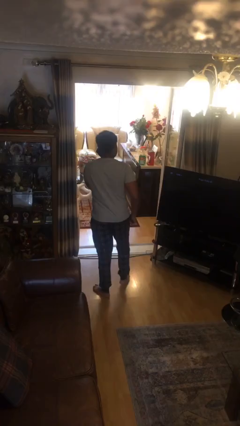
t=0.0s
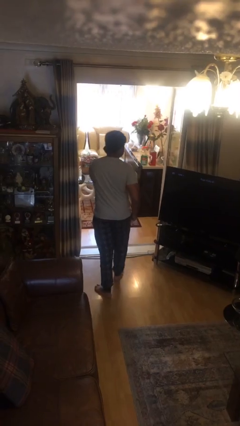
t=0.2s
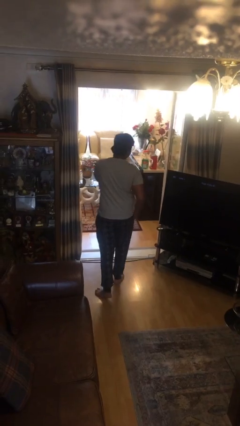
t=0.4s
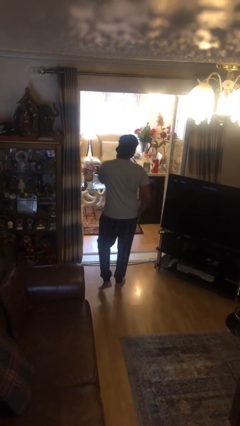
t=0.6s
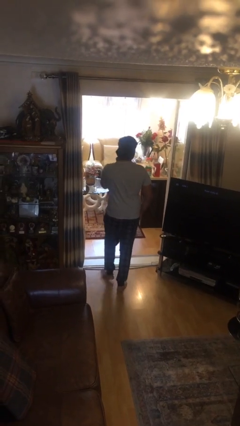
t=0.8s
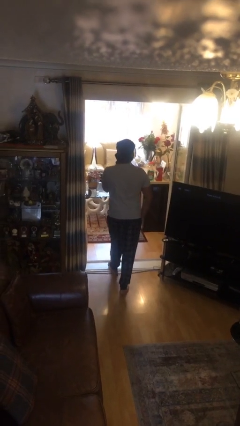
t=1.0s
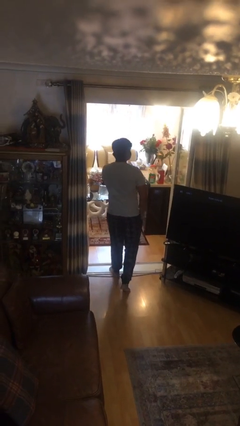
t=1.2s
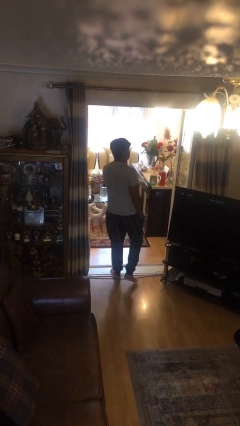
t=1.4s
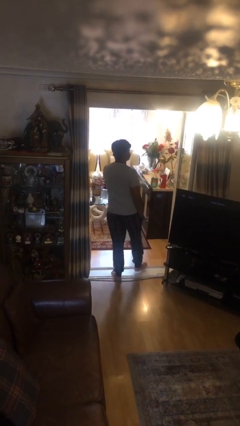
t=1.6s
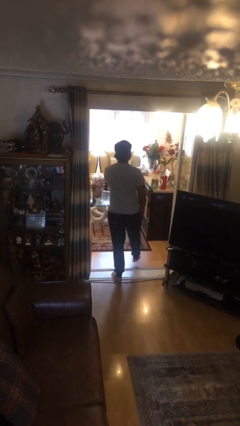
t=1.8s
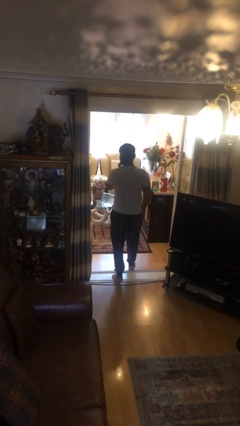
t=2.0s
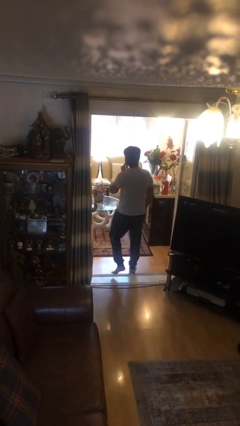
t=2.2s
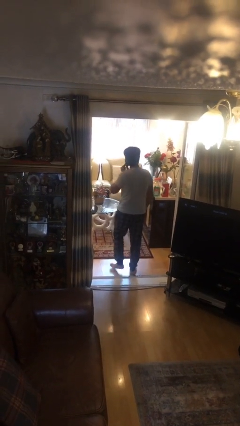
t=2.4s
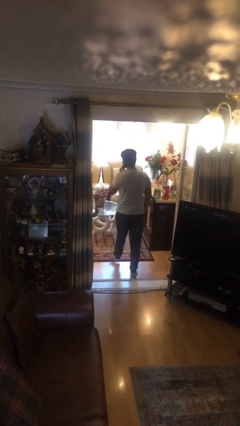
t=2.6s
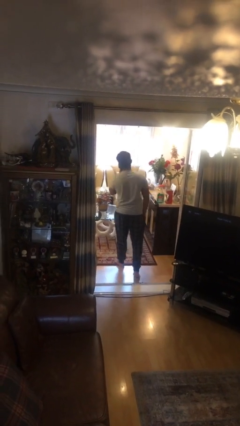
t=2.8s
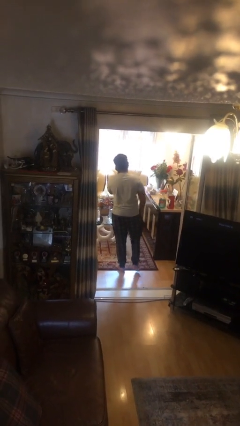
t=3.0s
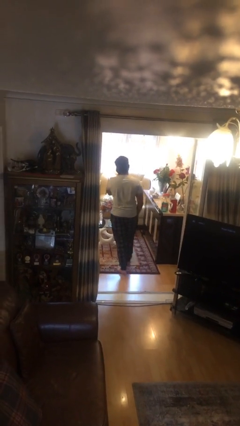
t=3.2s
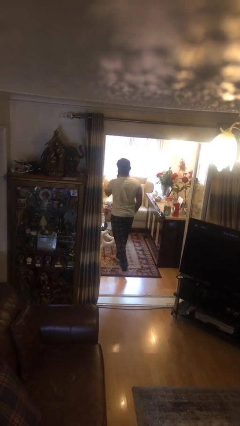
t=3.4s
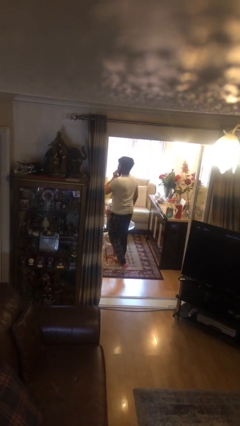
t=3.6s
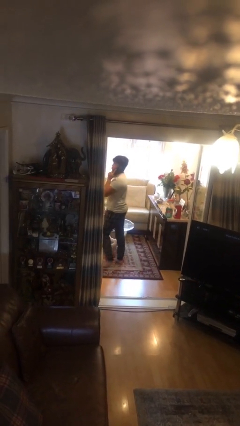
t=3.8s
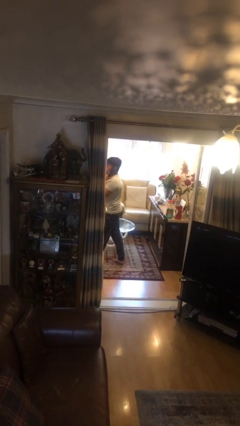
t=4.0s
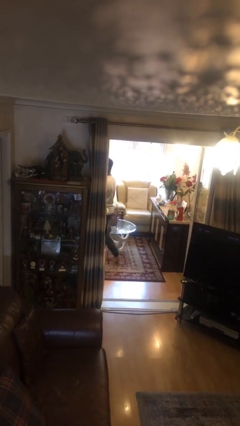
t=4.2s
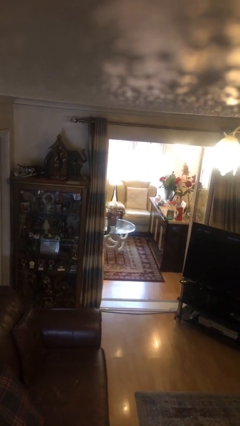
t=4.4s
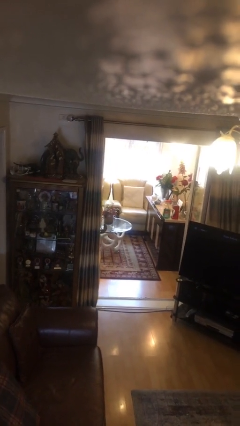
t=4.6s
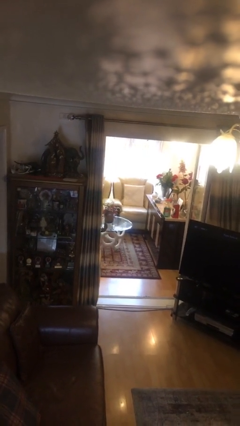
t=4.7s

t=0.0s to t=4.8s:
person exits scene through structure

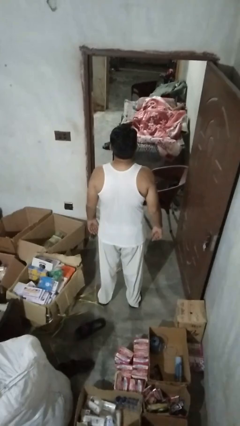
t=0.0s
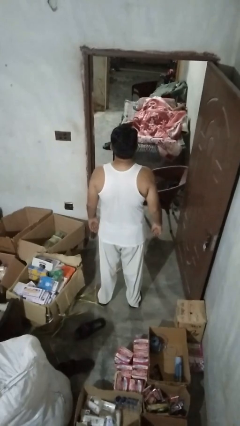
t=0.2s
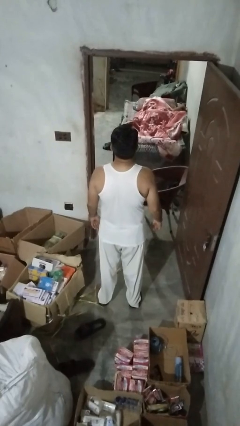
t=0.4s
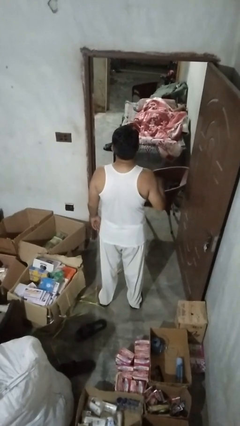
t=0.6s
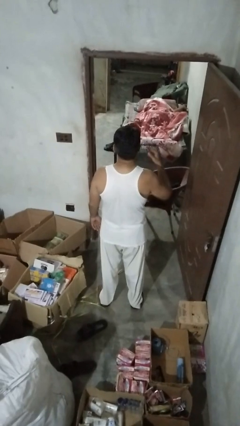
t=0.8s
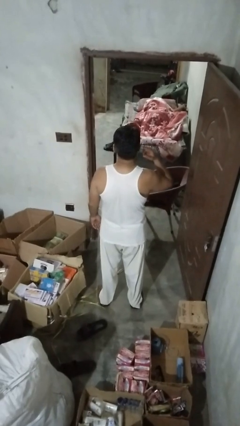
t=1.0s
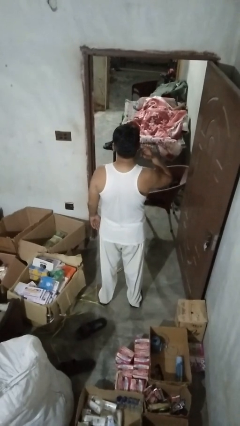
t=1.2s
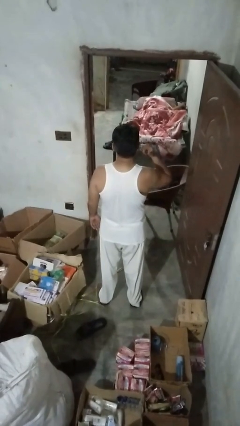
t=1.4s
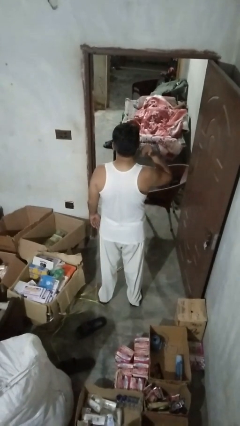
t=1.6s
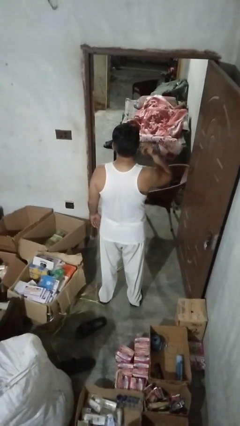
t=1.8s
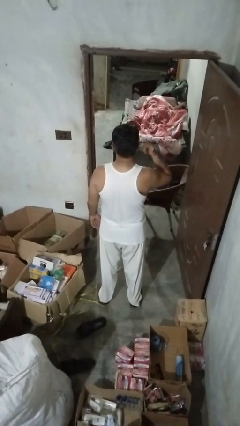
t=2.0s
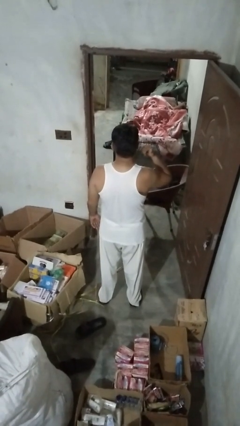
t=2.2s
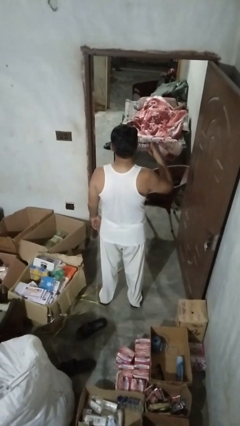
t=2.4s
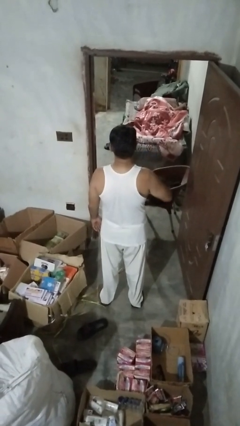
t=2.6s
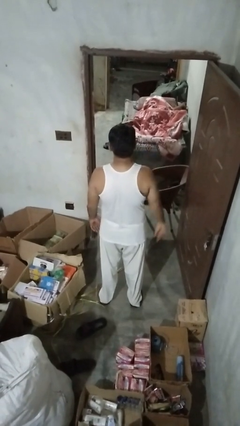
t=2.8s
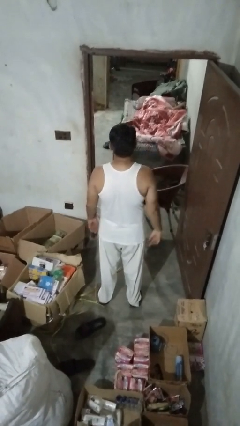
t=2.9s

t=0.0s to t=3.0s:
person touches earlobe

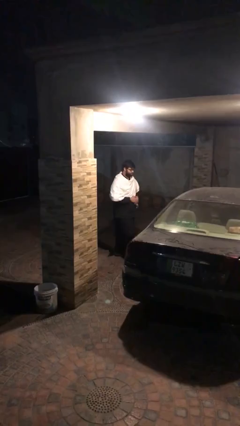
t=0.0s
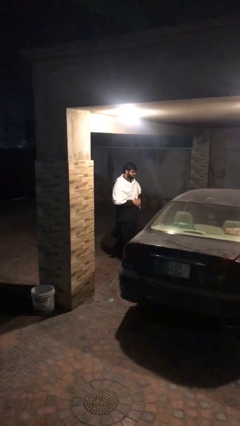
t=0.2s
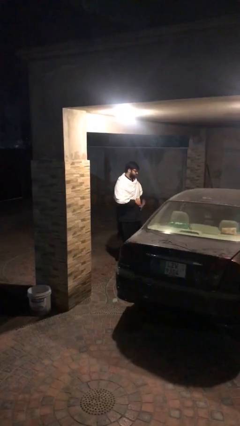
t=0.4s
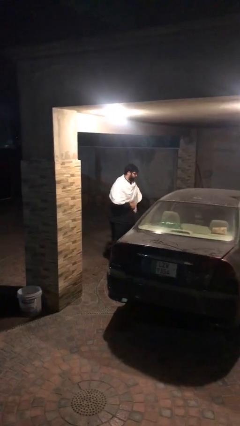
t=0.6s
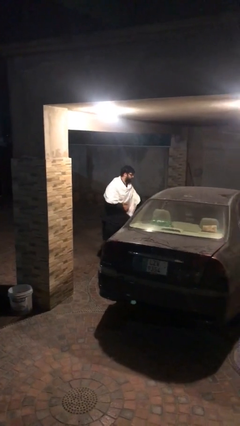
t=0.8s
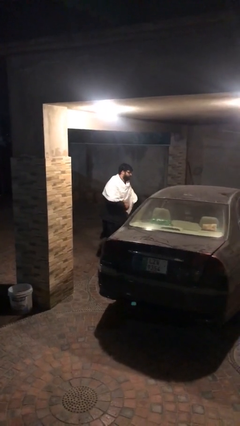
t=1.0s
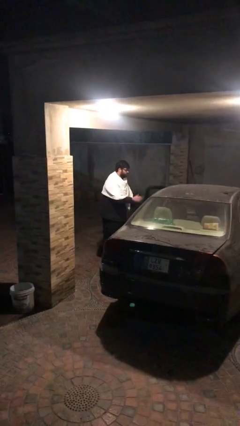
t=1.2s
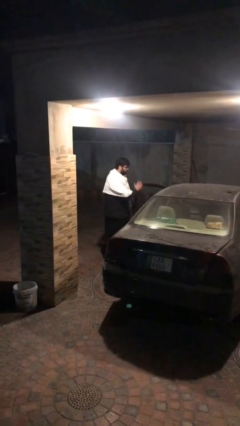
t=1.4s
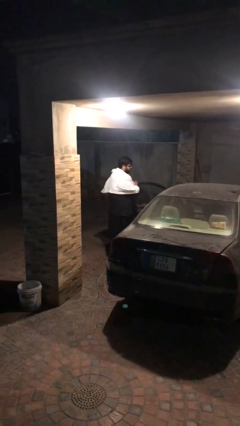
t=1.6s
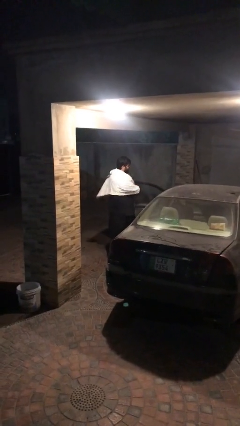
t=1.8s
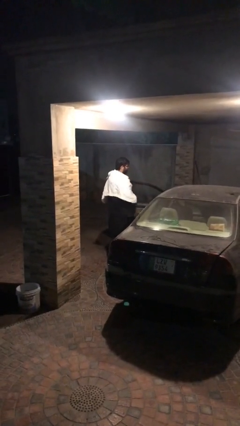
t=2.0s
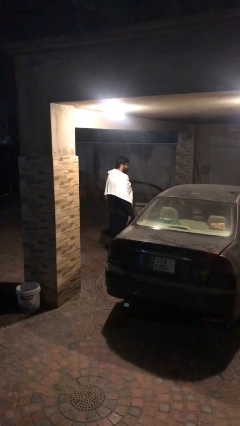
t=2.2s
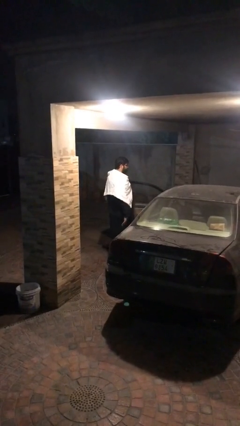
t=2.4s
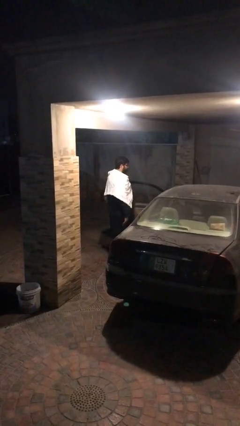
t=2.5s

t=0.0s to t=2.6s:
person opens car door

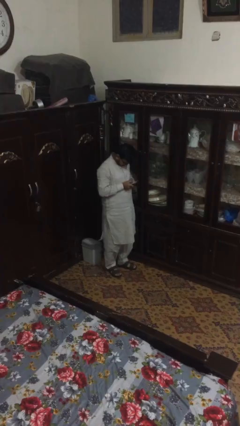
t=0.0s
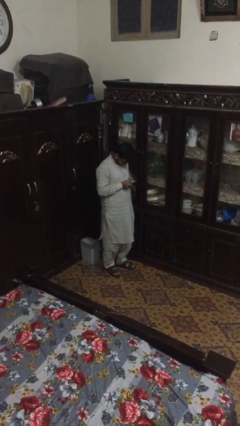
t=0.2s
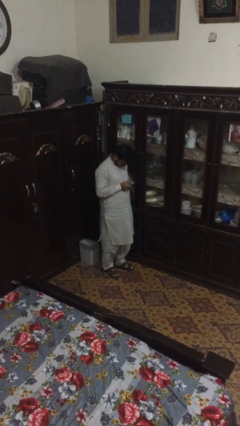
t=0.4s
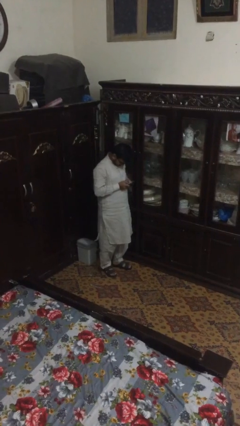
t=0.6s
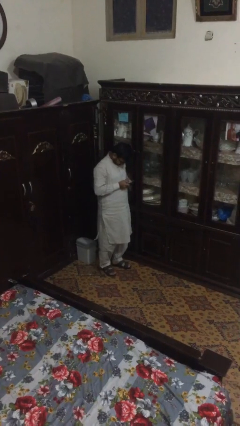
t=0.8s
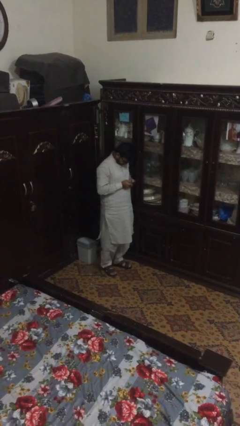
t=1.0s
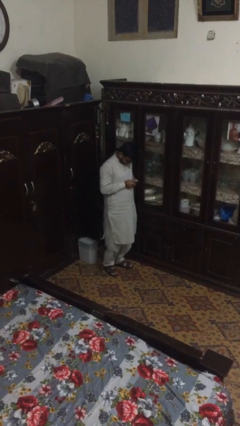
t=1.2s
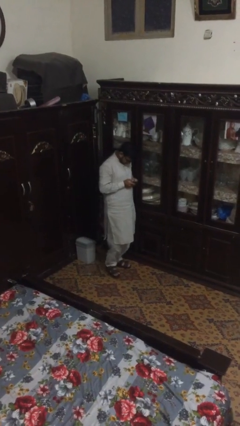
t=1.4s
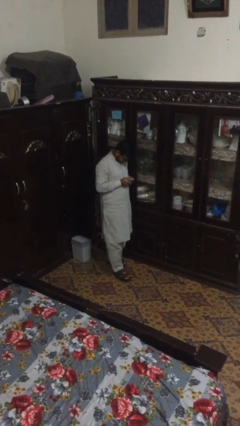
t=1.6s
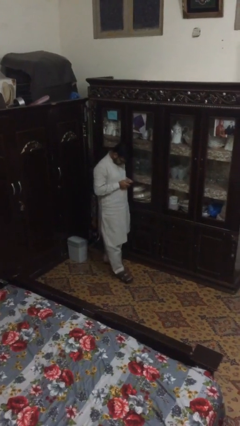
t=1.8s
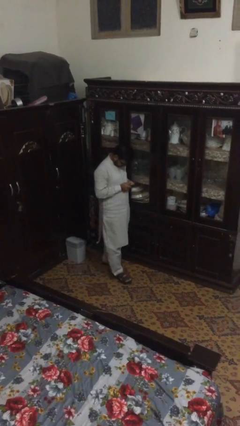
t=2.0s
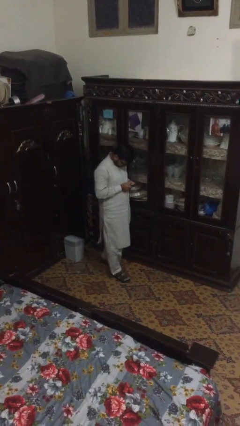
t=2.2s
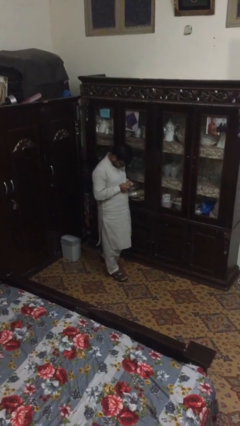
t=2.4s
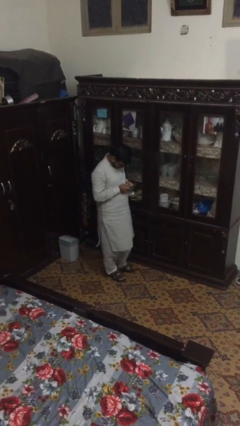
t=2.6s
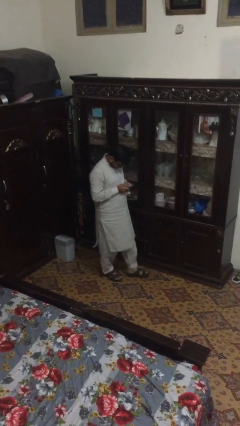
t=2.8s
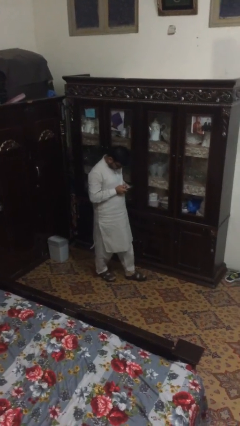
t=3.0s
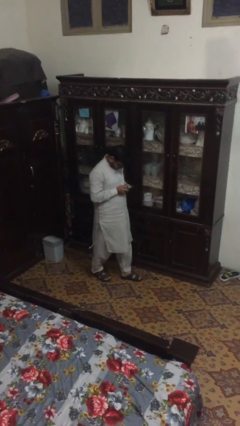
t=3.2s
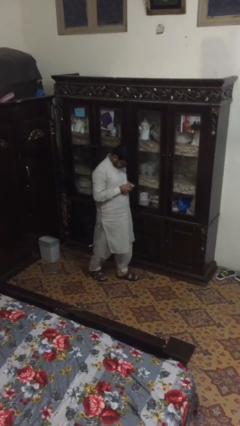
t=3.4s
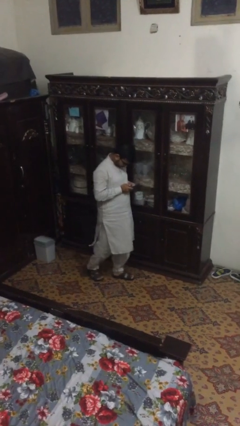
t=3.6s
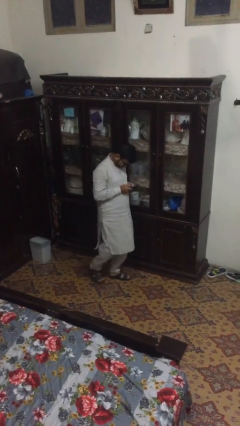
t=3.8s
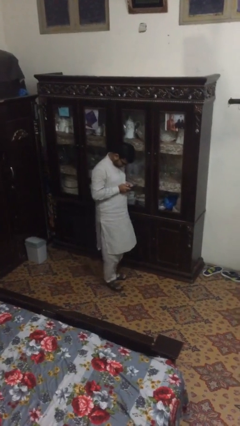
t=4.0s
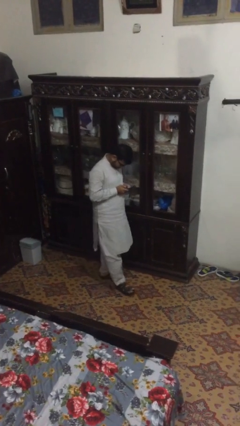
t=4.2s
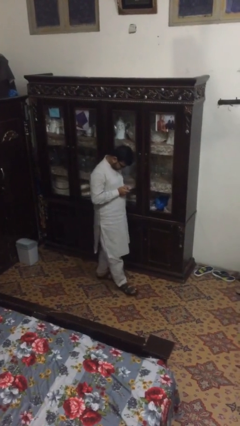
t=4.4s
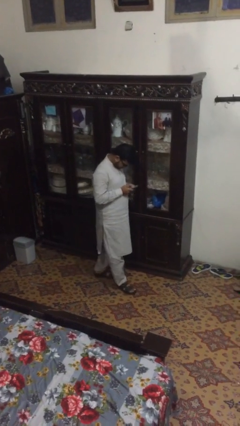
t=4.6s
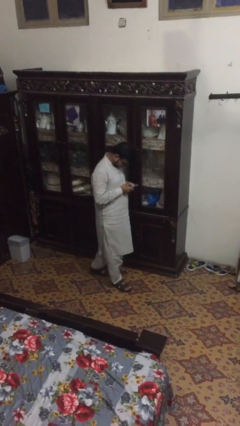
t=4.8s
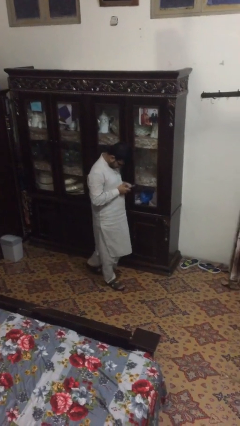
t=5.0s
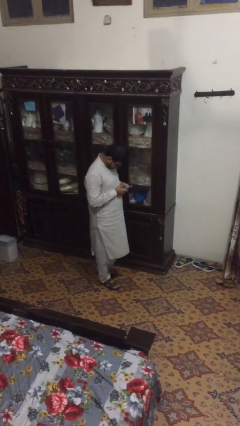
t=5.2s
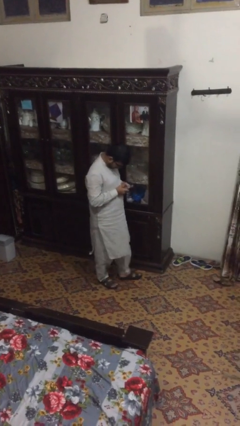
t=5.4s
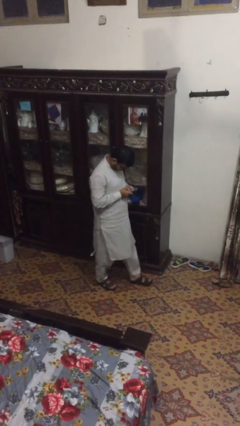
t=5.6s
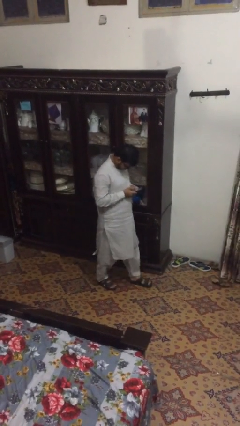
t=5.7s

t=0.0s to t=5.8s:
person texts on phone

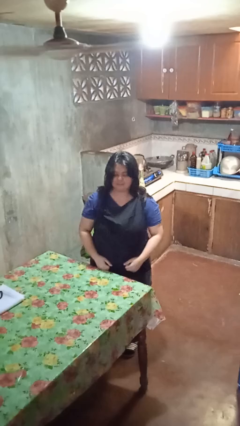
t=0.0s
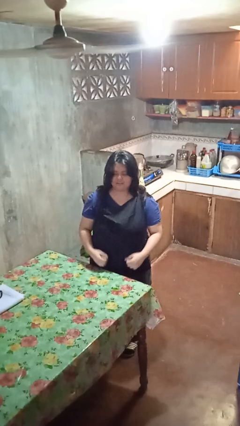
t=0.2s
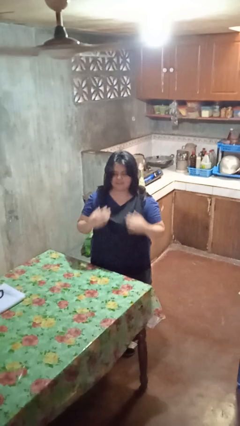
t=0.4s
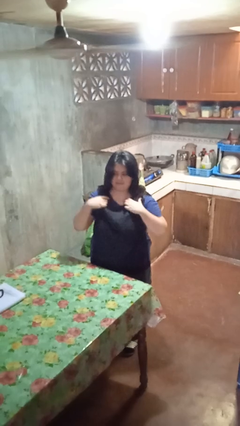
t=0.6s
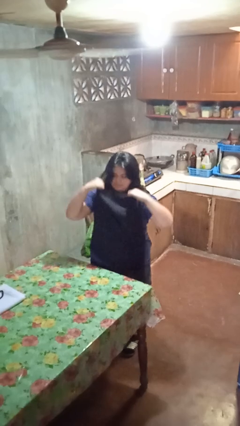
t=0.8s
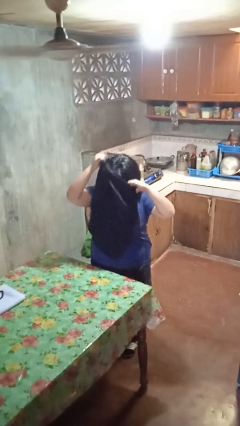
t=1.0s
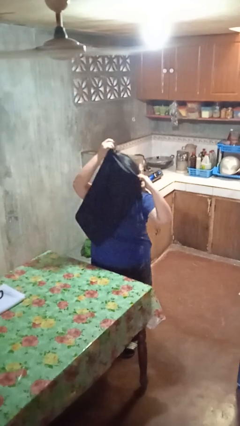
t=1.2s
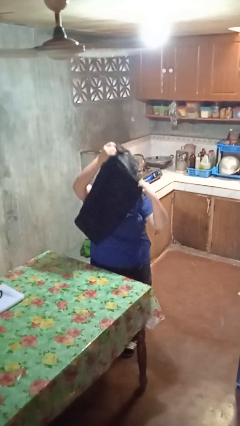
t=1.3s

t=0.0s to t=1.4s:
person takes off apron

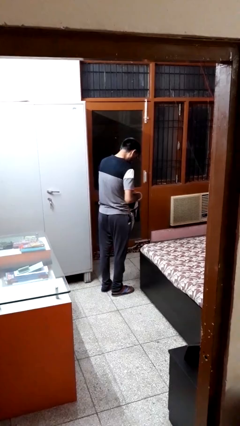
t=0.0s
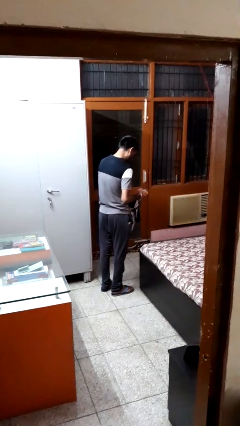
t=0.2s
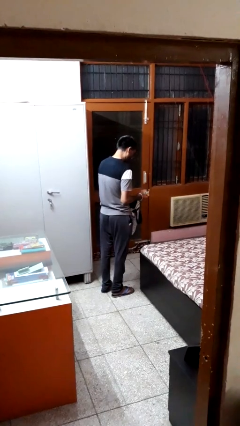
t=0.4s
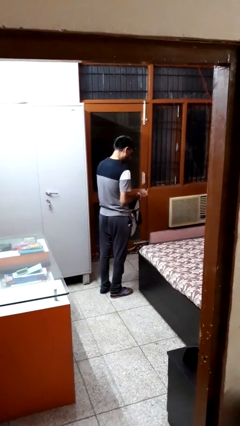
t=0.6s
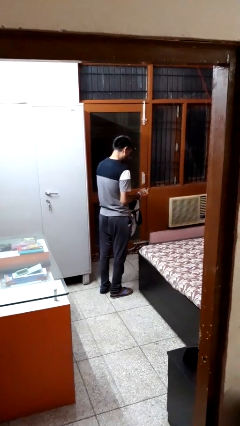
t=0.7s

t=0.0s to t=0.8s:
person takes object from bag
